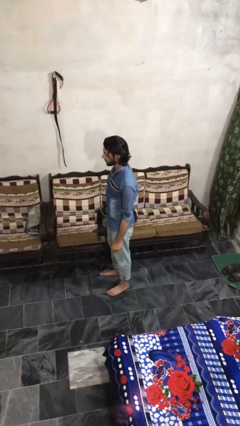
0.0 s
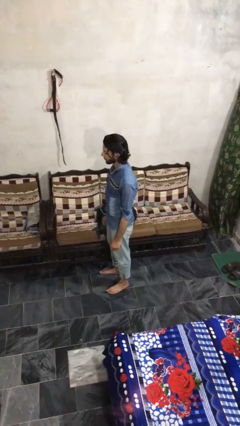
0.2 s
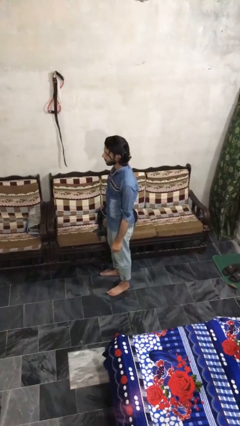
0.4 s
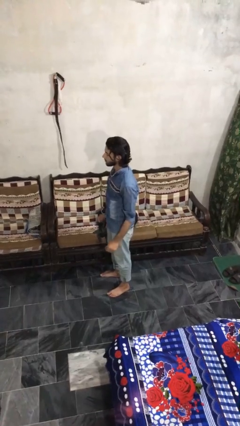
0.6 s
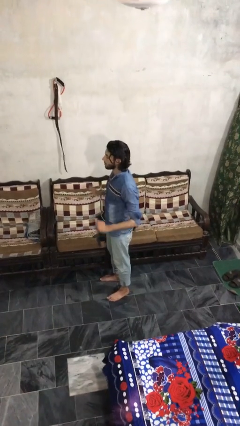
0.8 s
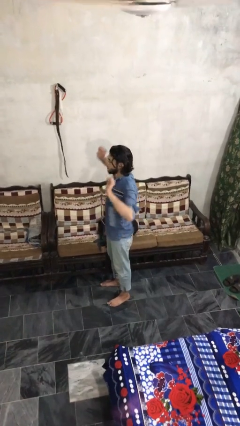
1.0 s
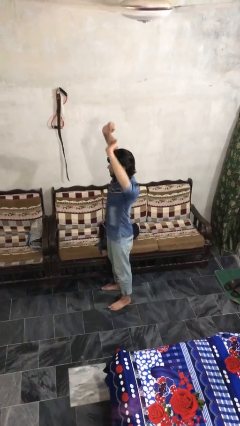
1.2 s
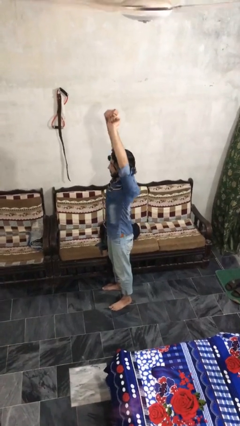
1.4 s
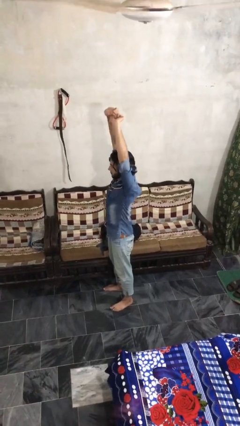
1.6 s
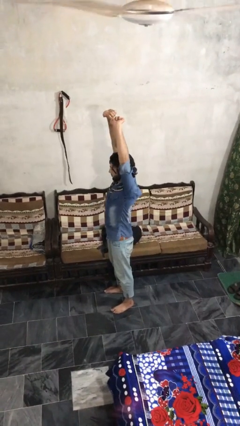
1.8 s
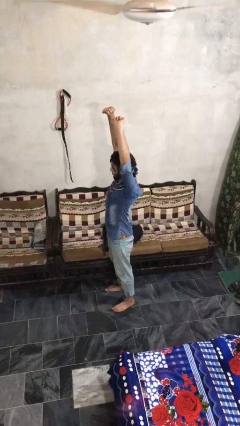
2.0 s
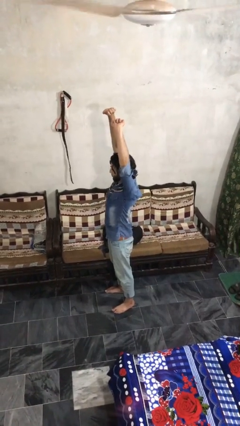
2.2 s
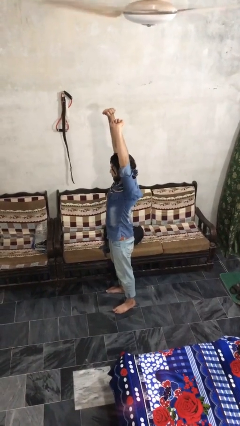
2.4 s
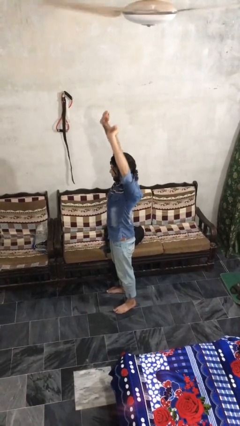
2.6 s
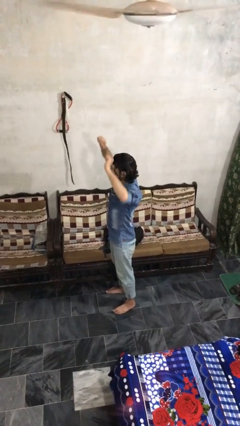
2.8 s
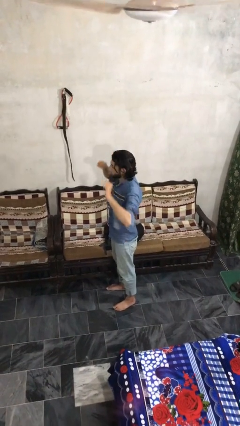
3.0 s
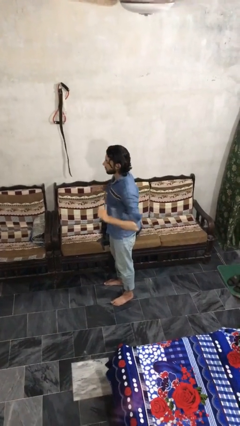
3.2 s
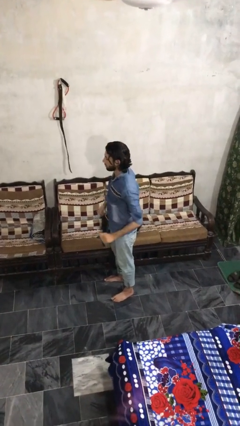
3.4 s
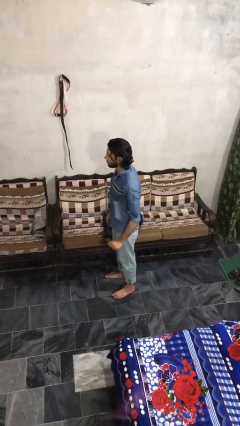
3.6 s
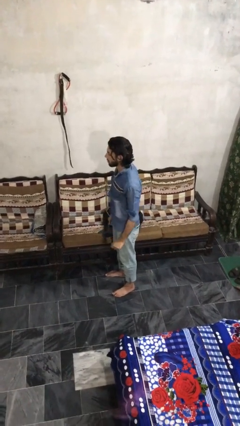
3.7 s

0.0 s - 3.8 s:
person stretches arms over head

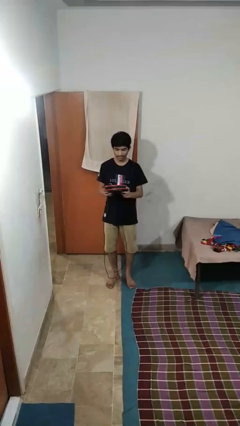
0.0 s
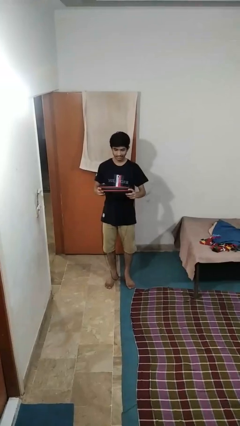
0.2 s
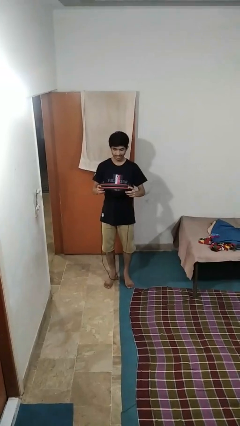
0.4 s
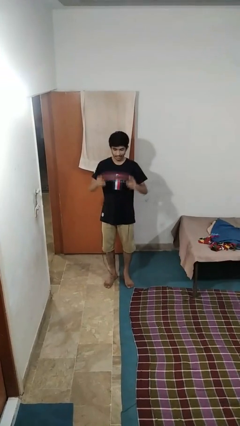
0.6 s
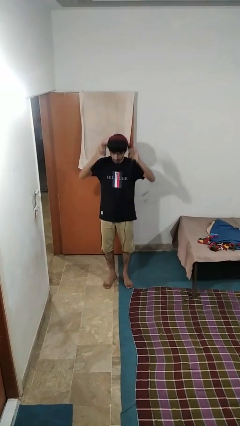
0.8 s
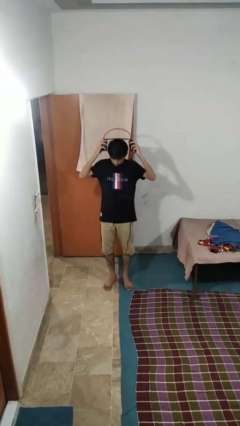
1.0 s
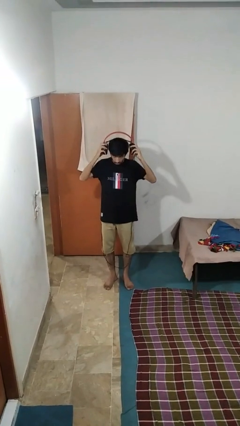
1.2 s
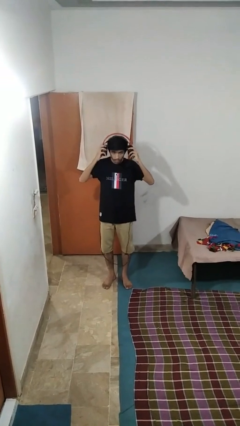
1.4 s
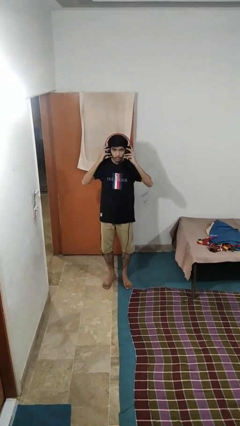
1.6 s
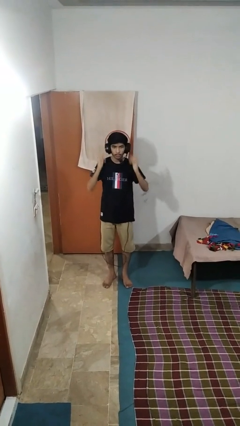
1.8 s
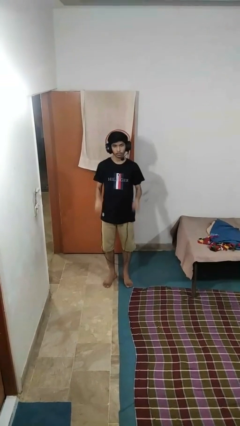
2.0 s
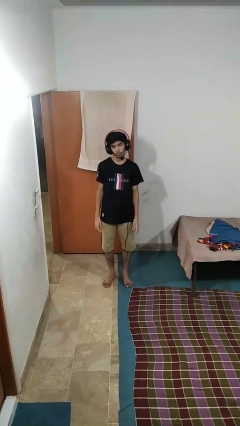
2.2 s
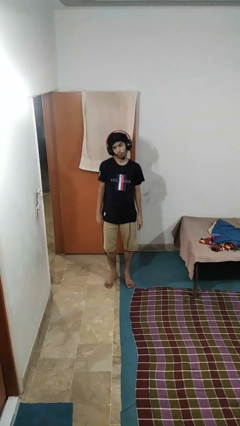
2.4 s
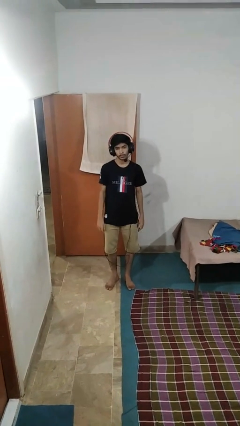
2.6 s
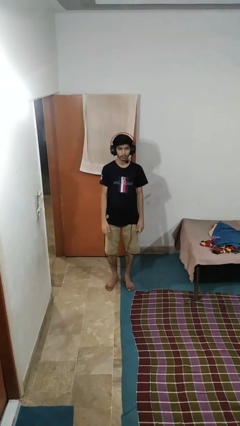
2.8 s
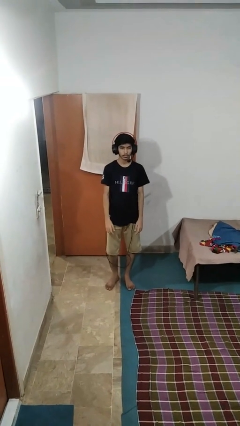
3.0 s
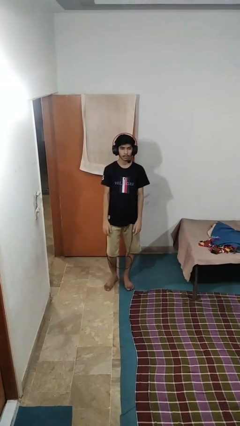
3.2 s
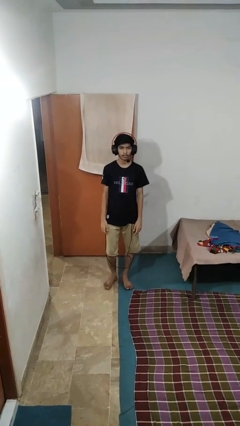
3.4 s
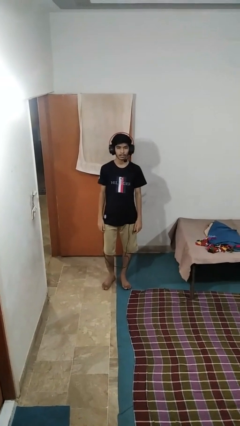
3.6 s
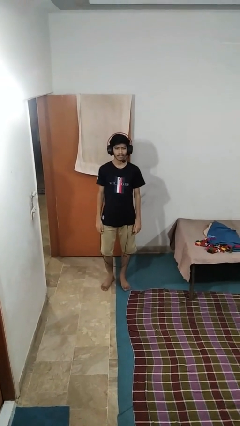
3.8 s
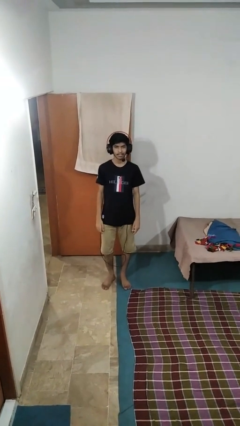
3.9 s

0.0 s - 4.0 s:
person puts on headphones

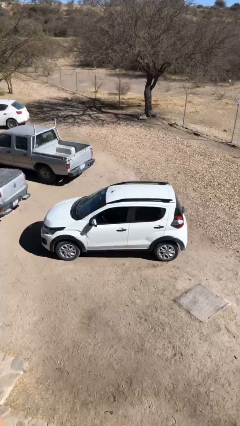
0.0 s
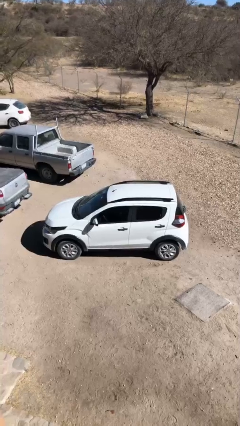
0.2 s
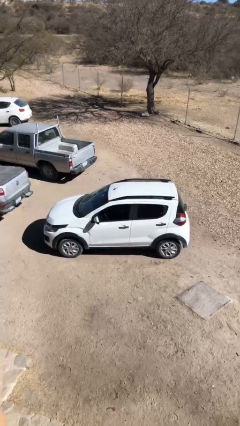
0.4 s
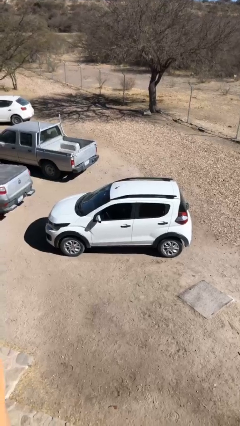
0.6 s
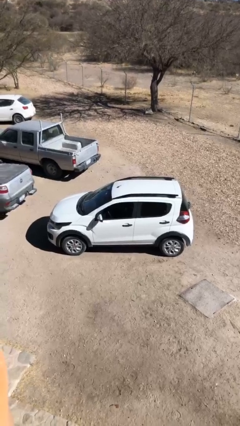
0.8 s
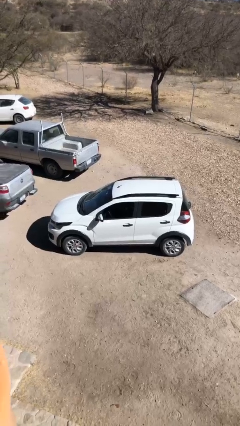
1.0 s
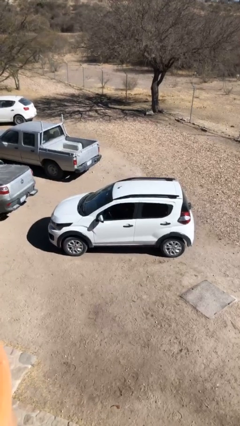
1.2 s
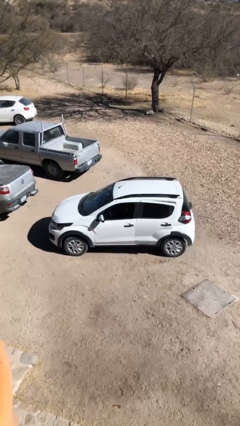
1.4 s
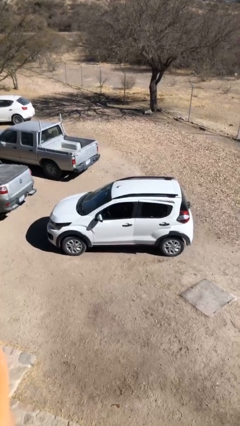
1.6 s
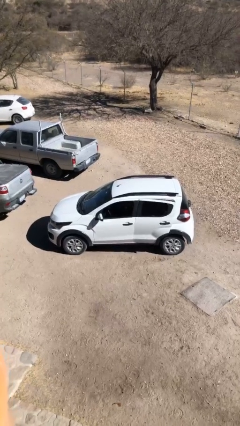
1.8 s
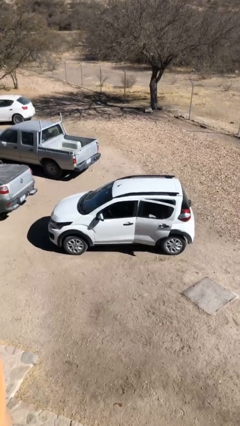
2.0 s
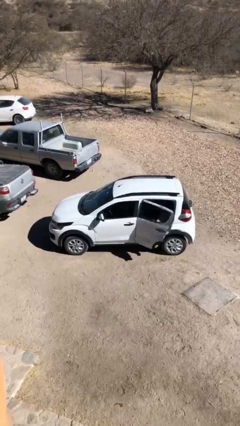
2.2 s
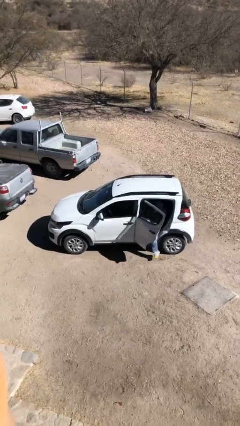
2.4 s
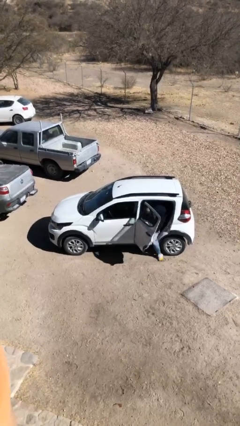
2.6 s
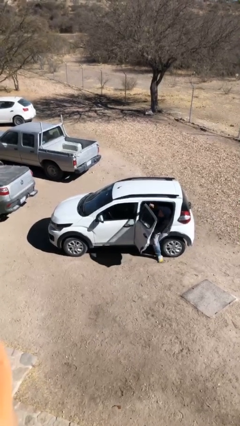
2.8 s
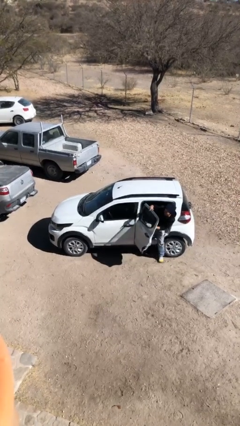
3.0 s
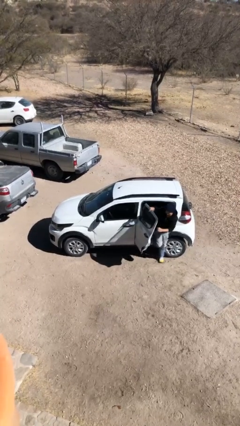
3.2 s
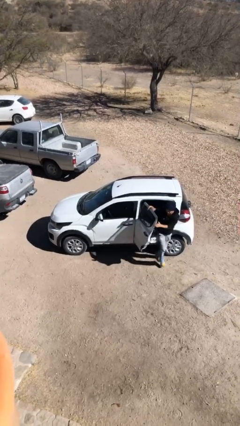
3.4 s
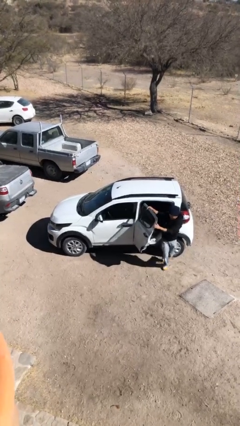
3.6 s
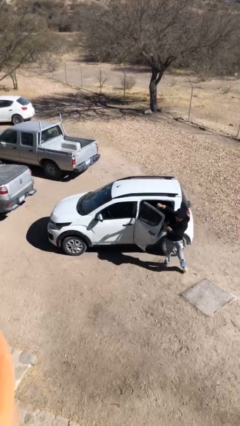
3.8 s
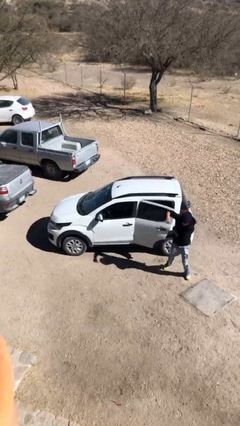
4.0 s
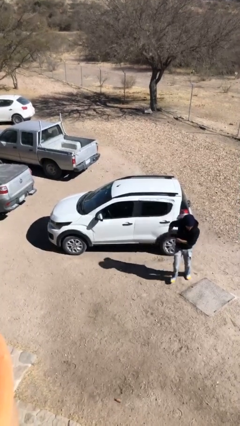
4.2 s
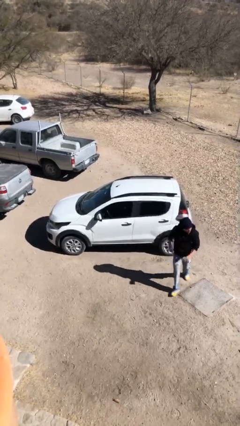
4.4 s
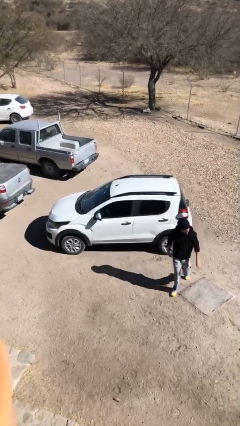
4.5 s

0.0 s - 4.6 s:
car drops off person

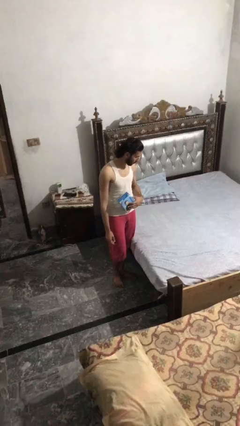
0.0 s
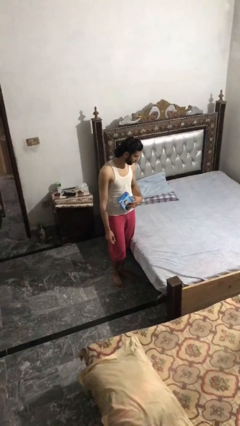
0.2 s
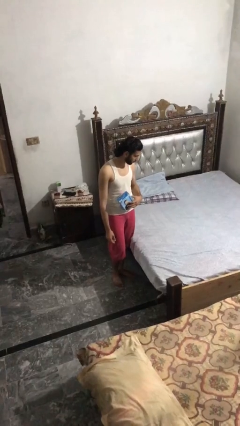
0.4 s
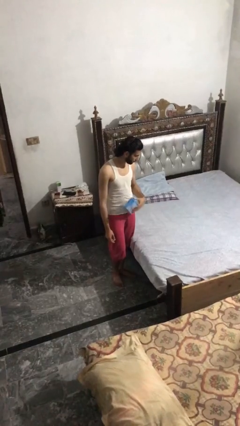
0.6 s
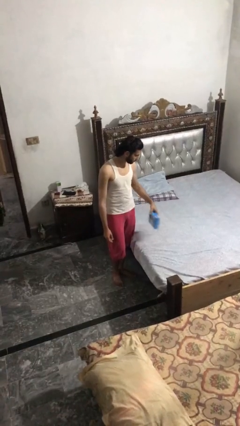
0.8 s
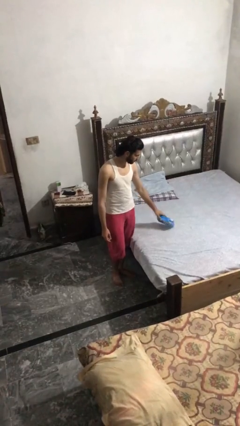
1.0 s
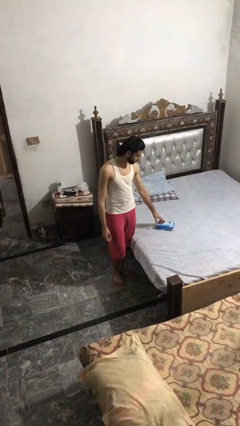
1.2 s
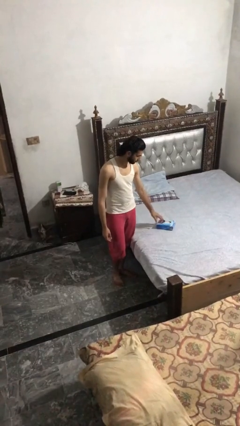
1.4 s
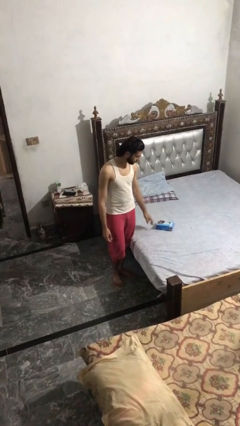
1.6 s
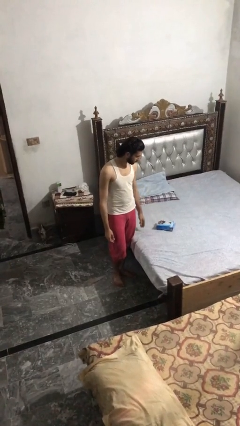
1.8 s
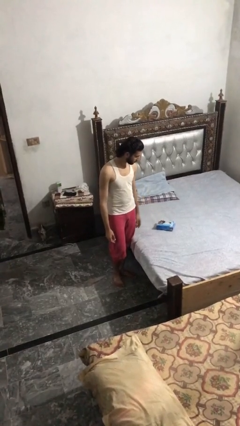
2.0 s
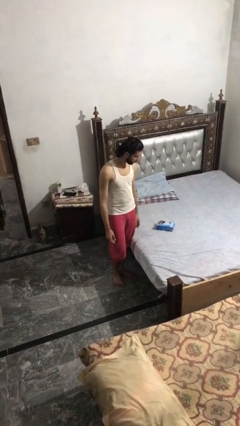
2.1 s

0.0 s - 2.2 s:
person puts down object on bed

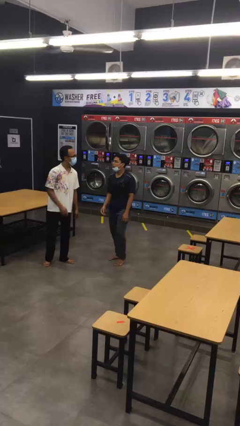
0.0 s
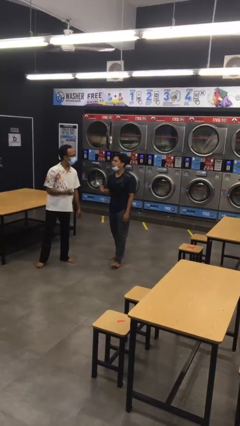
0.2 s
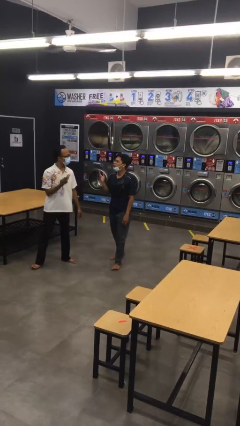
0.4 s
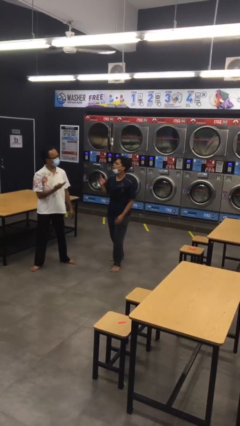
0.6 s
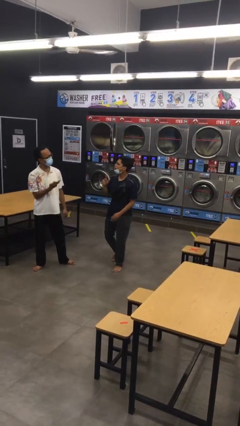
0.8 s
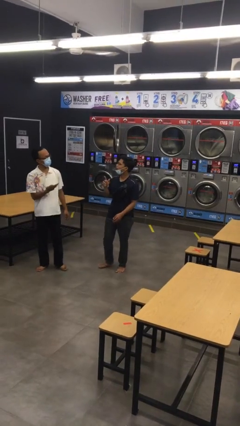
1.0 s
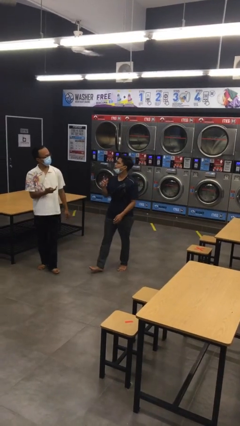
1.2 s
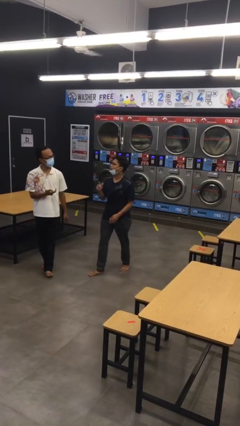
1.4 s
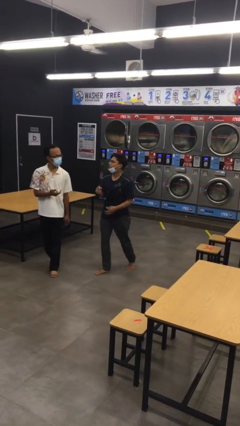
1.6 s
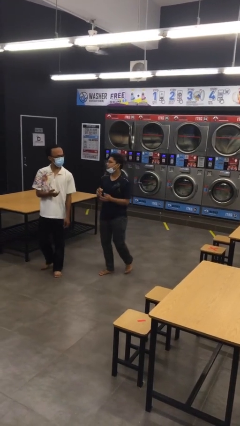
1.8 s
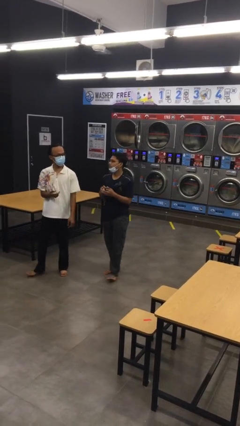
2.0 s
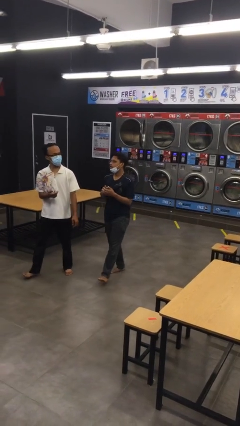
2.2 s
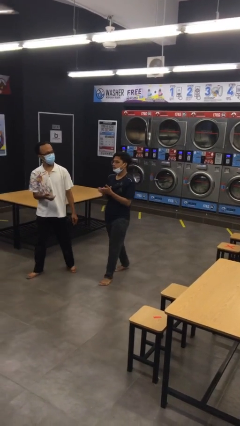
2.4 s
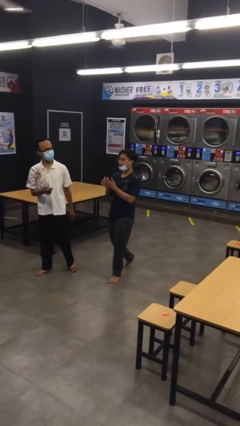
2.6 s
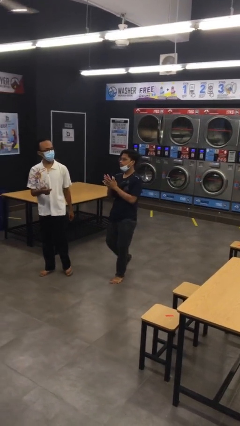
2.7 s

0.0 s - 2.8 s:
person talks to person
